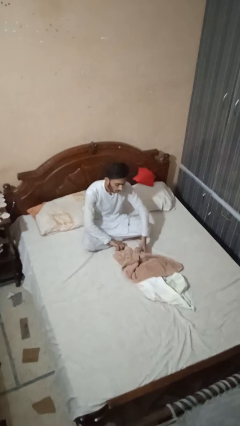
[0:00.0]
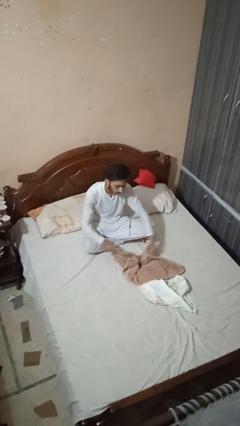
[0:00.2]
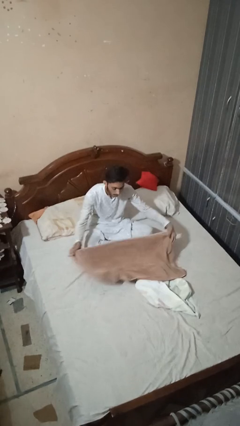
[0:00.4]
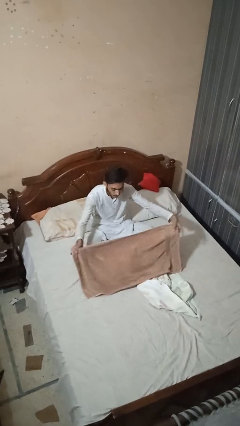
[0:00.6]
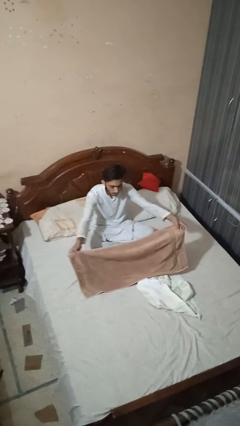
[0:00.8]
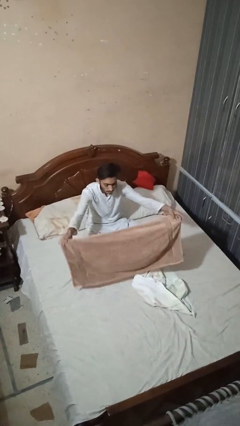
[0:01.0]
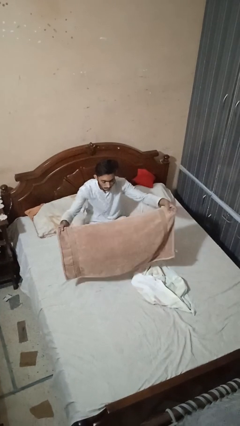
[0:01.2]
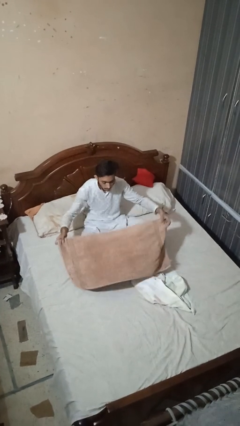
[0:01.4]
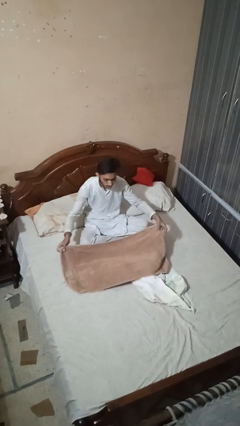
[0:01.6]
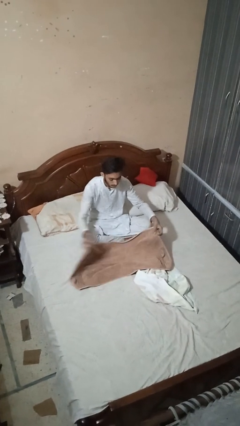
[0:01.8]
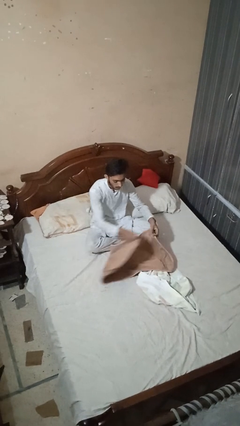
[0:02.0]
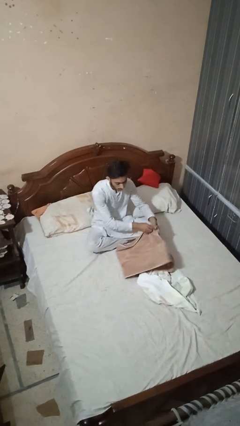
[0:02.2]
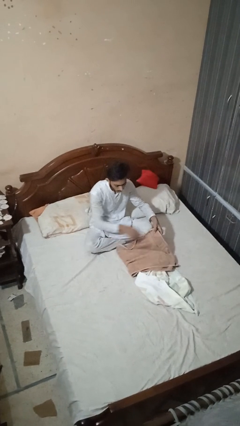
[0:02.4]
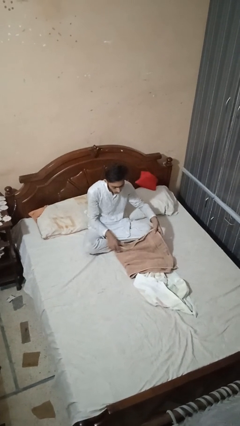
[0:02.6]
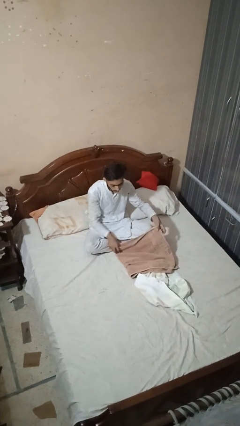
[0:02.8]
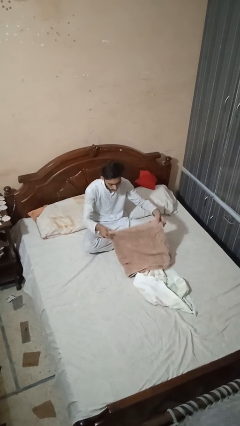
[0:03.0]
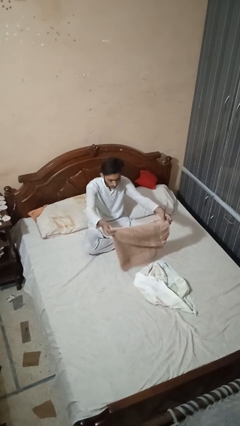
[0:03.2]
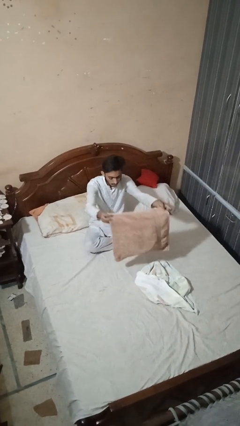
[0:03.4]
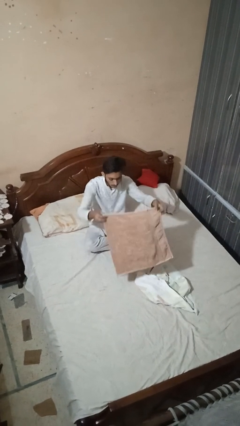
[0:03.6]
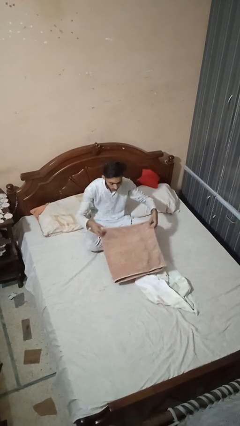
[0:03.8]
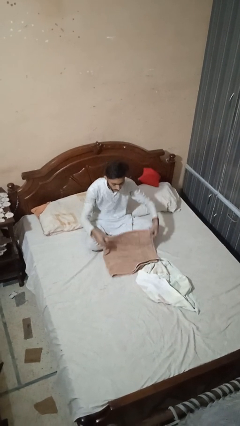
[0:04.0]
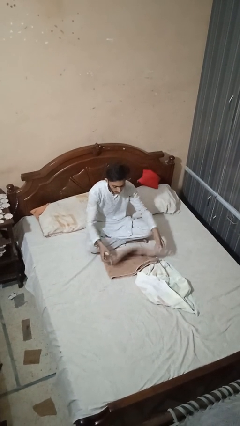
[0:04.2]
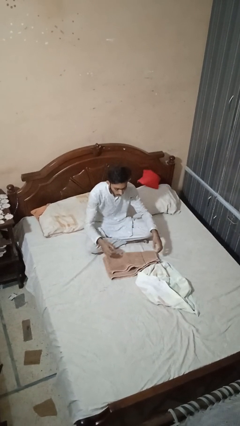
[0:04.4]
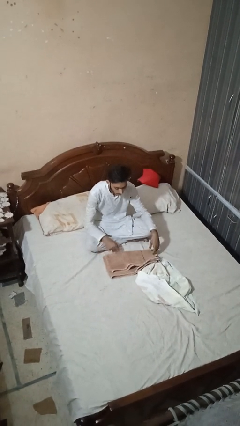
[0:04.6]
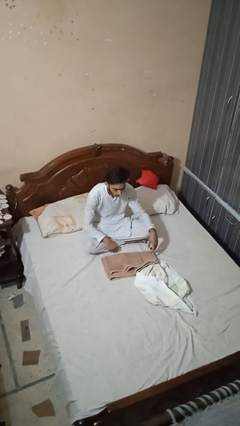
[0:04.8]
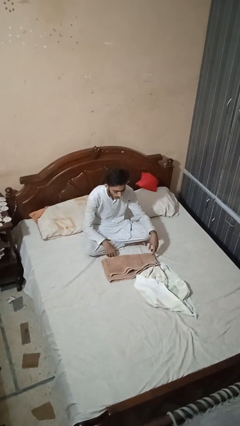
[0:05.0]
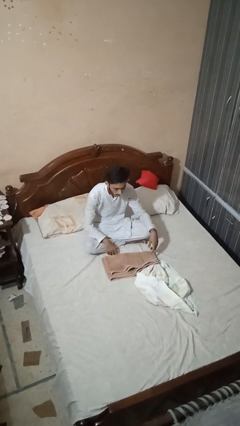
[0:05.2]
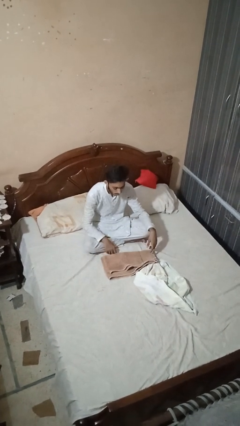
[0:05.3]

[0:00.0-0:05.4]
person folds towel

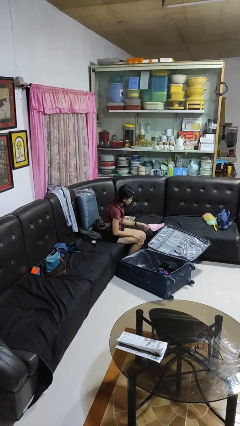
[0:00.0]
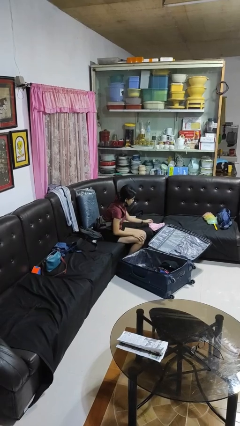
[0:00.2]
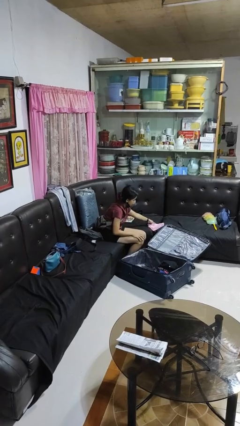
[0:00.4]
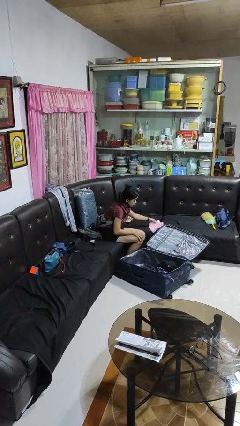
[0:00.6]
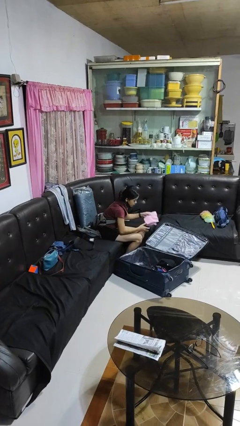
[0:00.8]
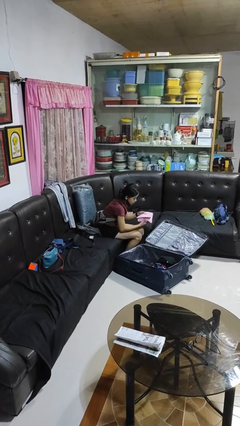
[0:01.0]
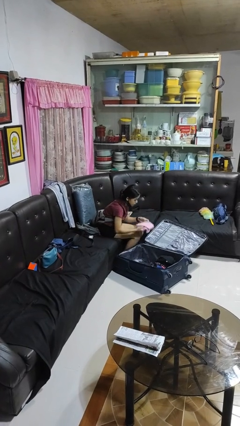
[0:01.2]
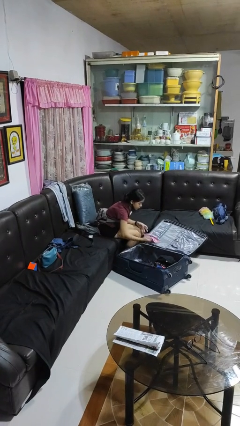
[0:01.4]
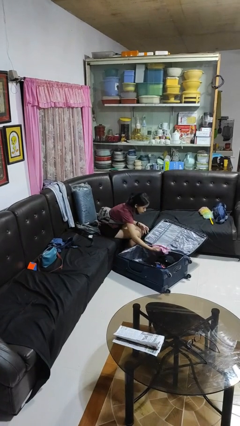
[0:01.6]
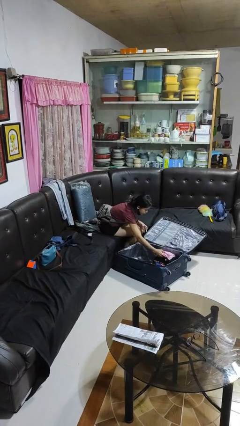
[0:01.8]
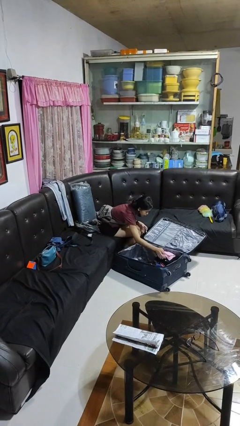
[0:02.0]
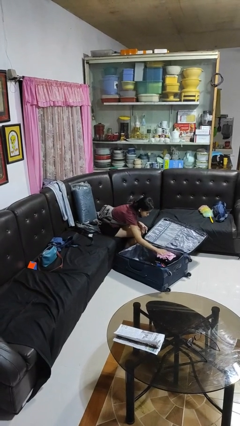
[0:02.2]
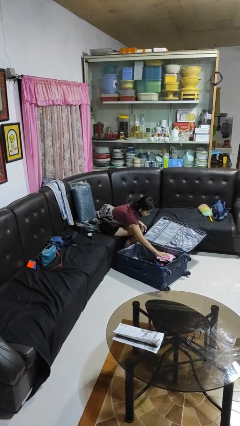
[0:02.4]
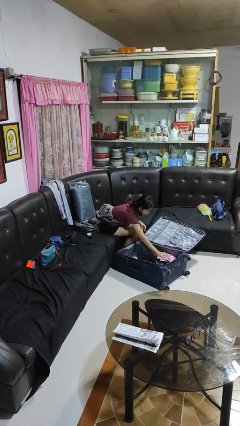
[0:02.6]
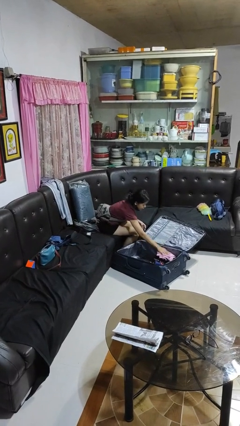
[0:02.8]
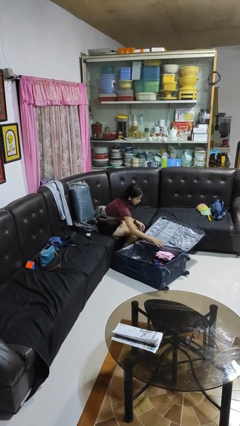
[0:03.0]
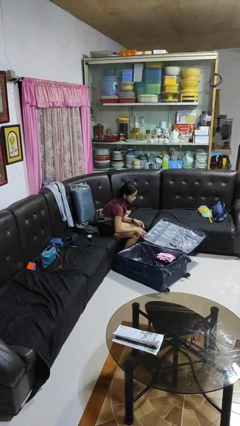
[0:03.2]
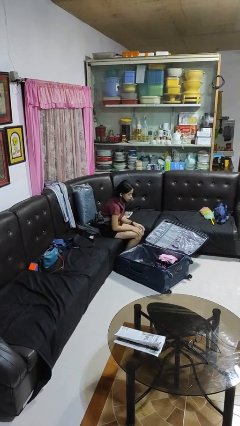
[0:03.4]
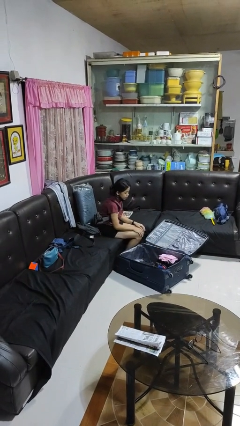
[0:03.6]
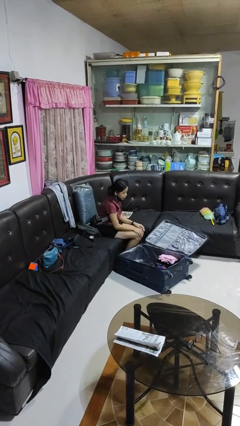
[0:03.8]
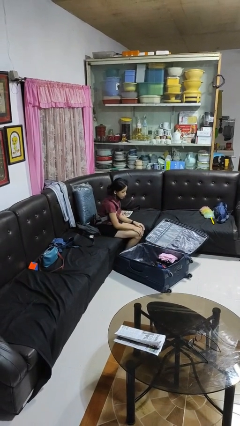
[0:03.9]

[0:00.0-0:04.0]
person loads clothes into suitcase

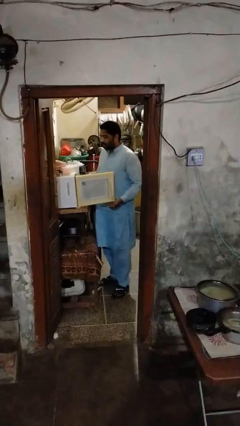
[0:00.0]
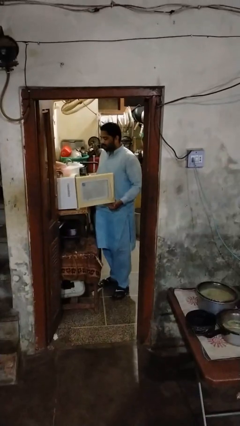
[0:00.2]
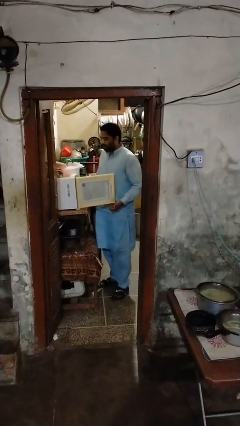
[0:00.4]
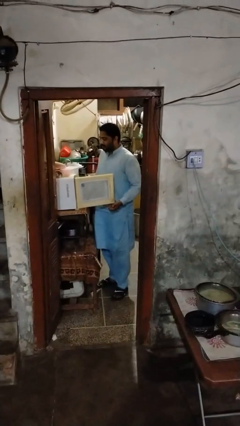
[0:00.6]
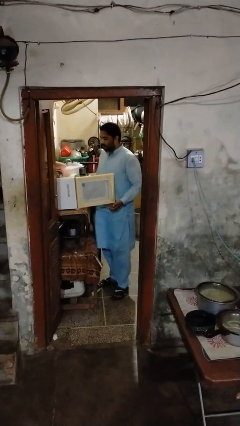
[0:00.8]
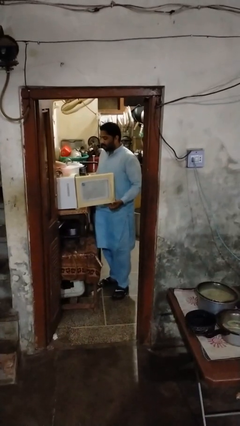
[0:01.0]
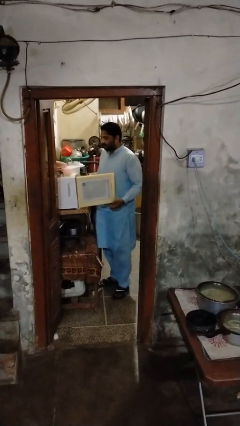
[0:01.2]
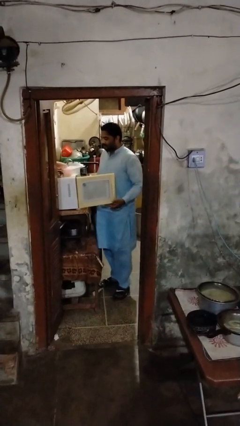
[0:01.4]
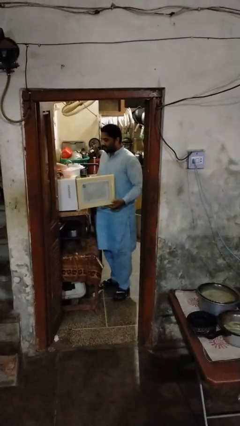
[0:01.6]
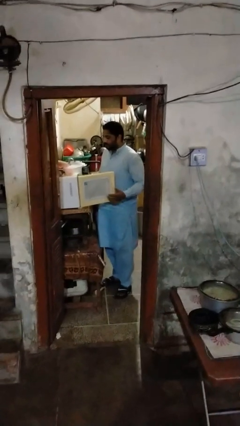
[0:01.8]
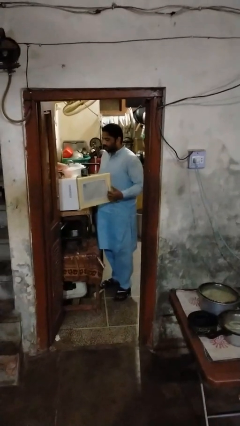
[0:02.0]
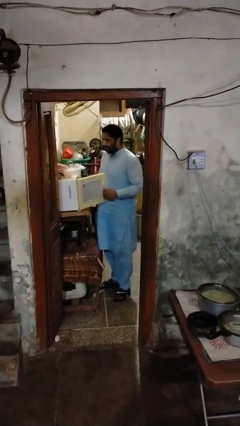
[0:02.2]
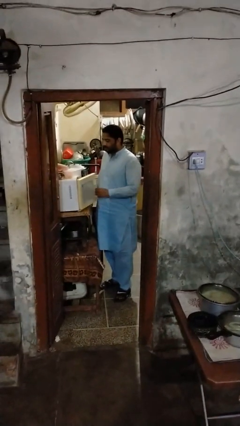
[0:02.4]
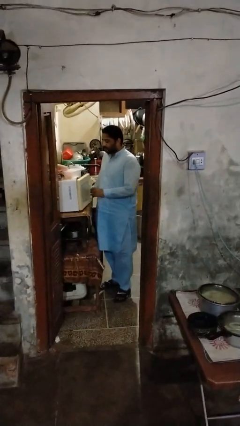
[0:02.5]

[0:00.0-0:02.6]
person stands up from floor

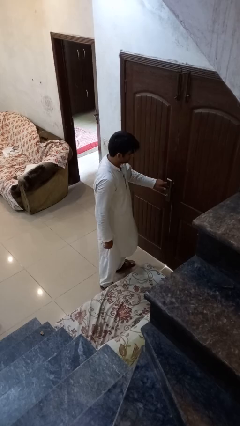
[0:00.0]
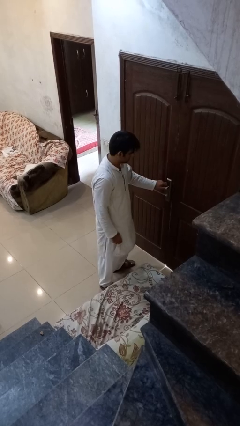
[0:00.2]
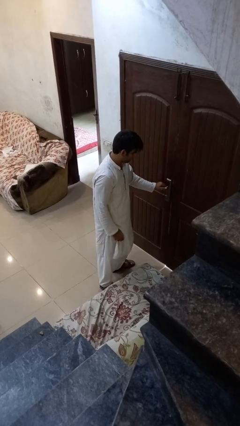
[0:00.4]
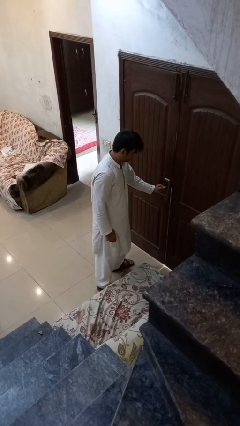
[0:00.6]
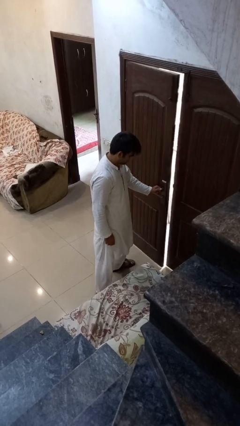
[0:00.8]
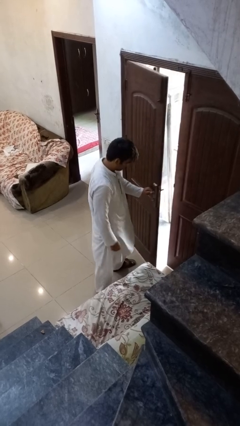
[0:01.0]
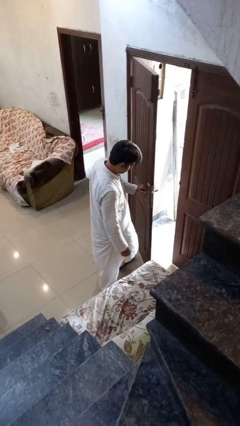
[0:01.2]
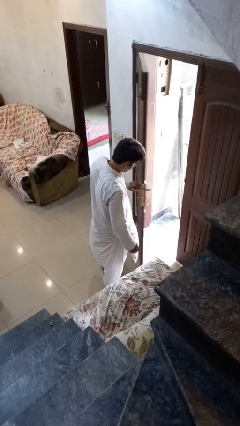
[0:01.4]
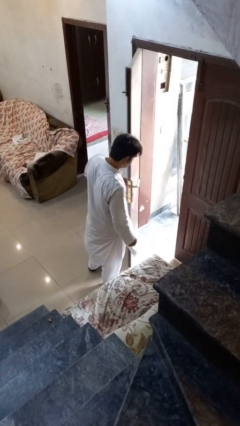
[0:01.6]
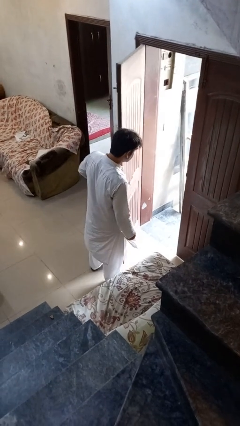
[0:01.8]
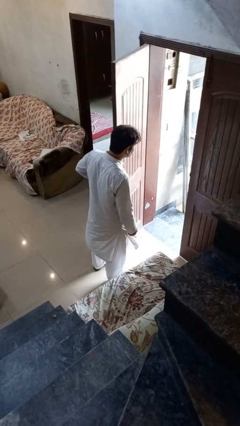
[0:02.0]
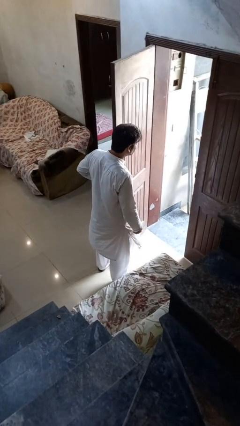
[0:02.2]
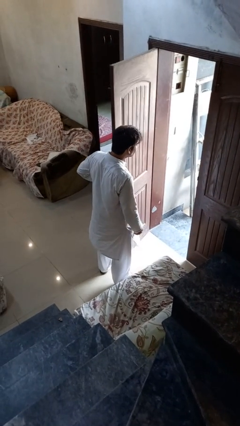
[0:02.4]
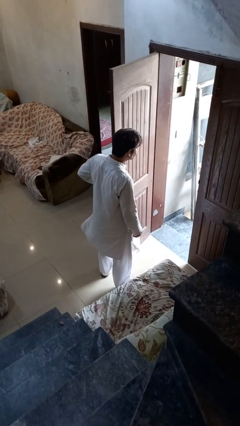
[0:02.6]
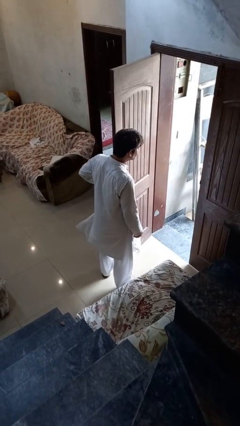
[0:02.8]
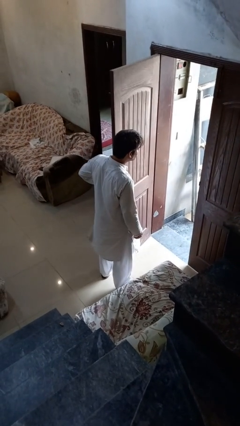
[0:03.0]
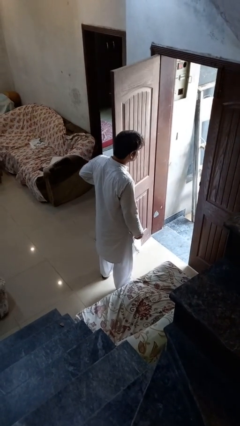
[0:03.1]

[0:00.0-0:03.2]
person opens facility door

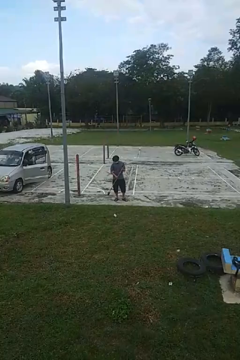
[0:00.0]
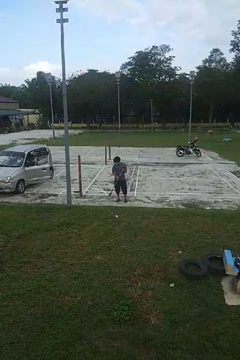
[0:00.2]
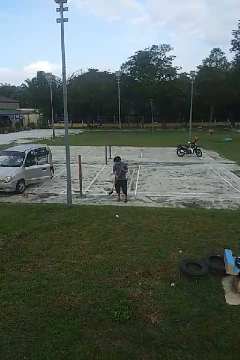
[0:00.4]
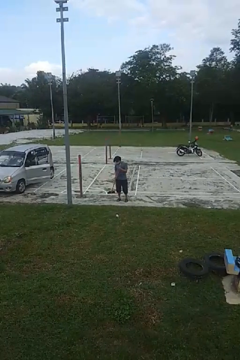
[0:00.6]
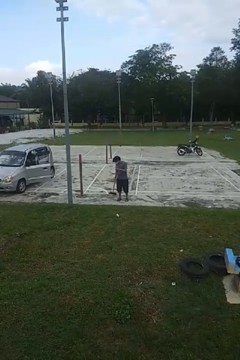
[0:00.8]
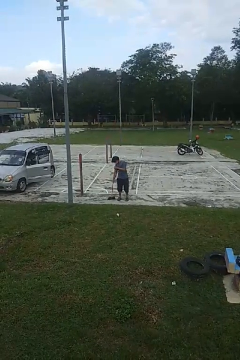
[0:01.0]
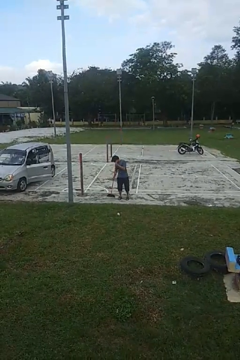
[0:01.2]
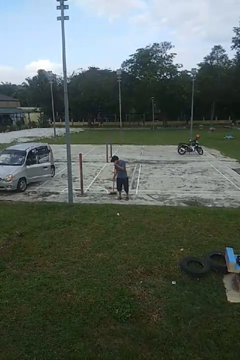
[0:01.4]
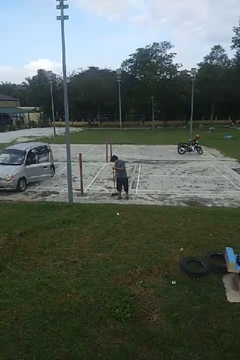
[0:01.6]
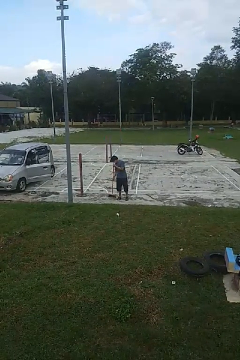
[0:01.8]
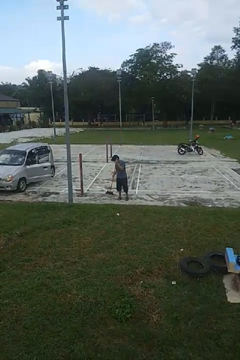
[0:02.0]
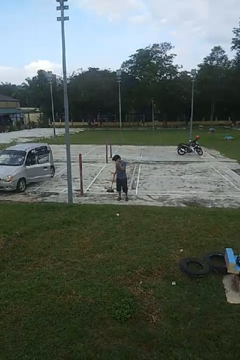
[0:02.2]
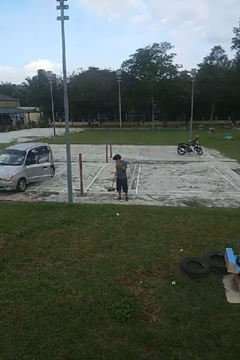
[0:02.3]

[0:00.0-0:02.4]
person sweeps floor

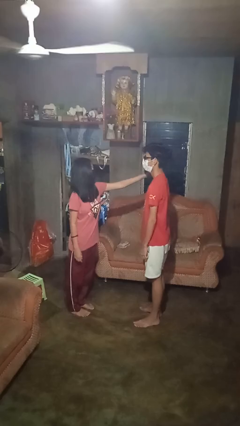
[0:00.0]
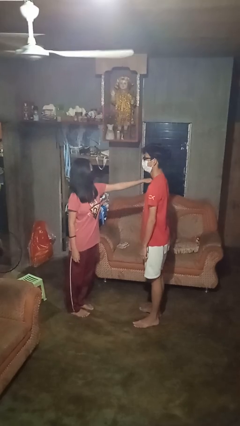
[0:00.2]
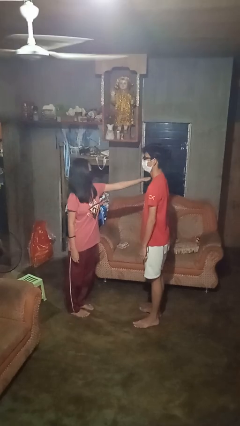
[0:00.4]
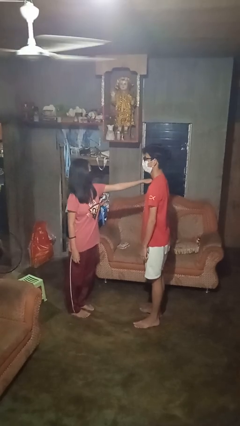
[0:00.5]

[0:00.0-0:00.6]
person pounds shoulders of person
